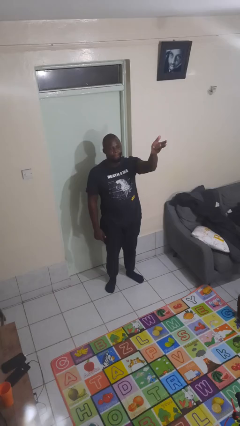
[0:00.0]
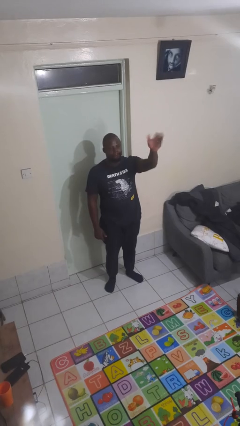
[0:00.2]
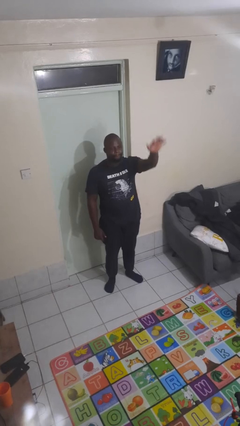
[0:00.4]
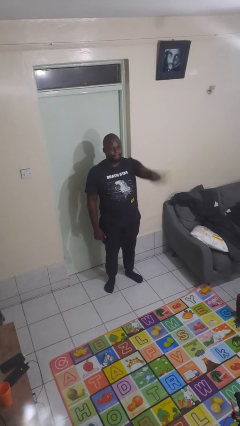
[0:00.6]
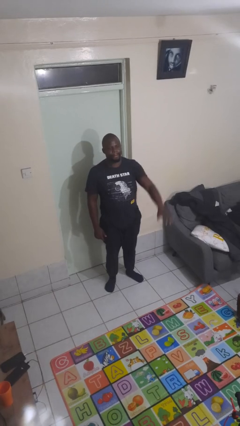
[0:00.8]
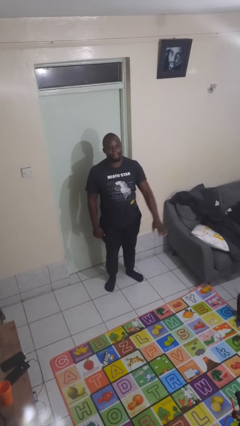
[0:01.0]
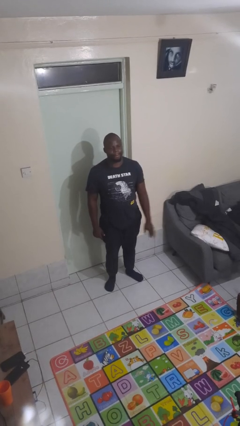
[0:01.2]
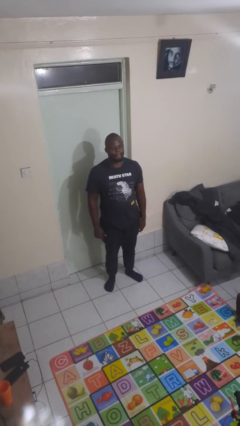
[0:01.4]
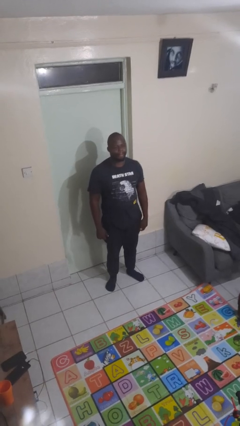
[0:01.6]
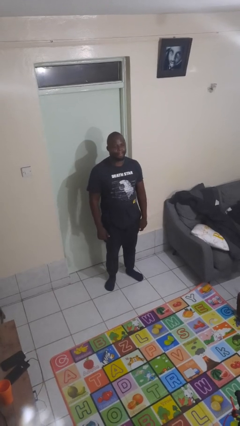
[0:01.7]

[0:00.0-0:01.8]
person gestures swipe down

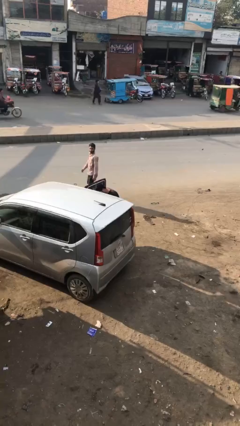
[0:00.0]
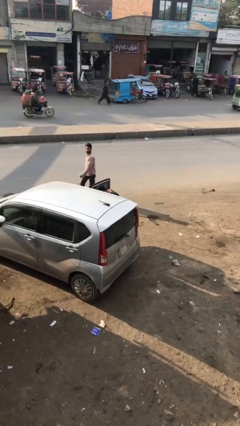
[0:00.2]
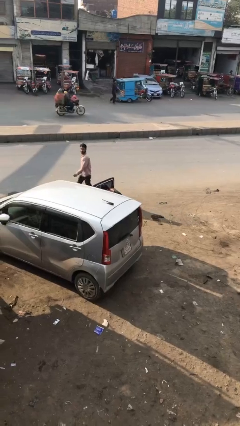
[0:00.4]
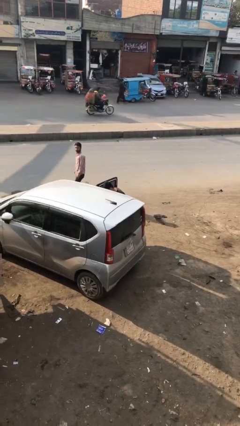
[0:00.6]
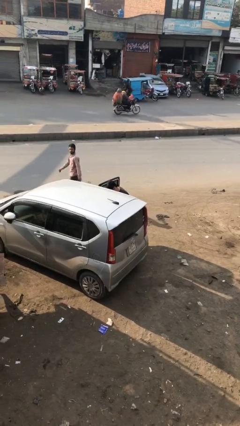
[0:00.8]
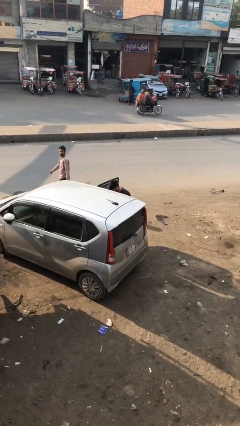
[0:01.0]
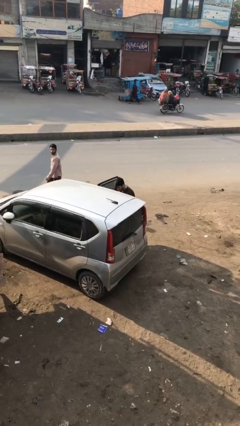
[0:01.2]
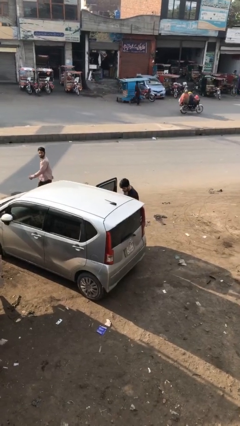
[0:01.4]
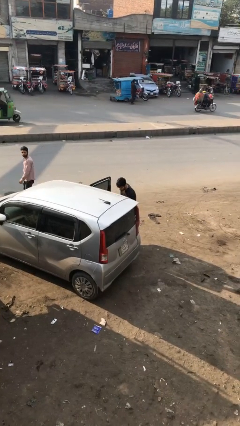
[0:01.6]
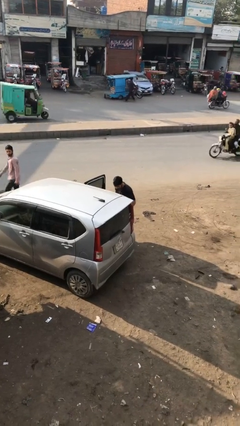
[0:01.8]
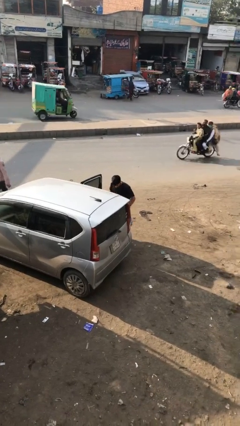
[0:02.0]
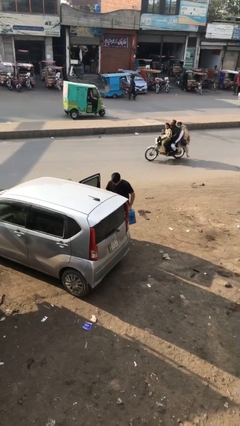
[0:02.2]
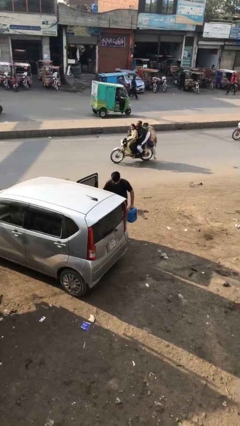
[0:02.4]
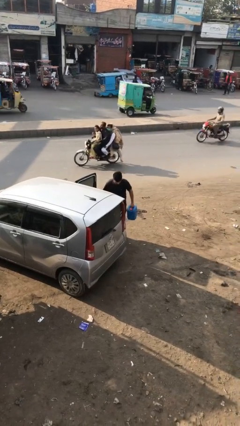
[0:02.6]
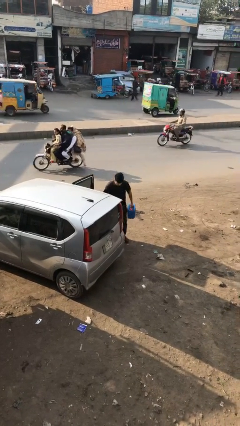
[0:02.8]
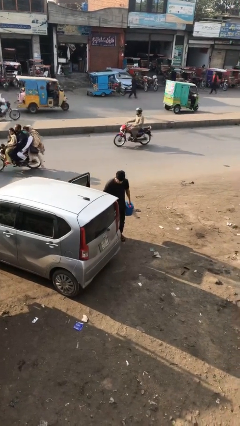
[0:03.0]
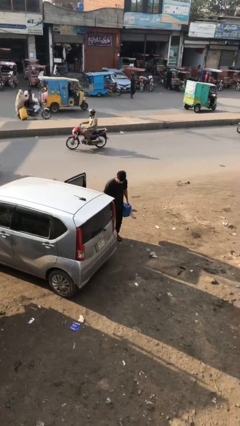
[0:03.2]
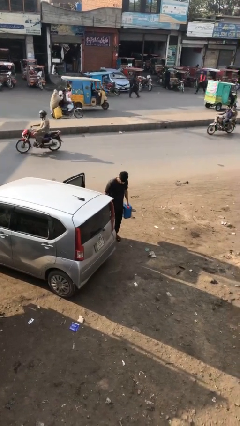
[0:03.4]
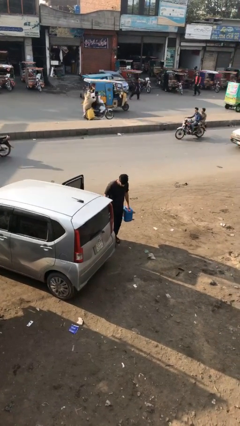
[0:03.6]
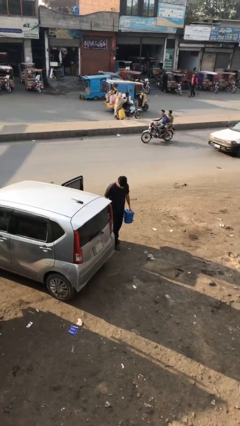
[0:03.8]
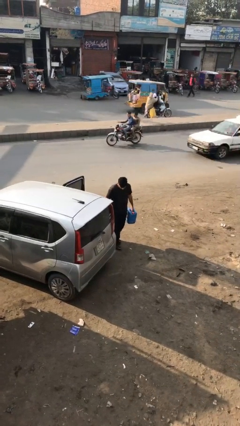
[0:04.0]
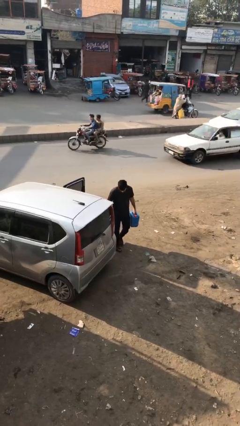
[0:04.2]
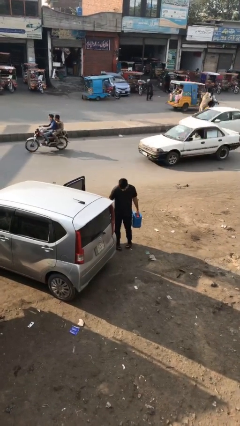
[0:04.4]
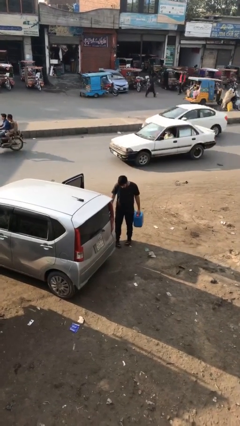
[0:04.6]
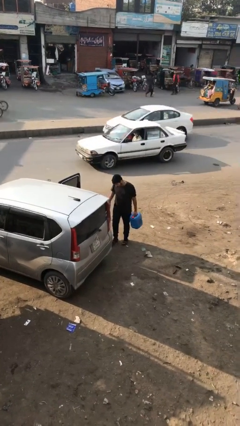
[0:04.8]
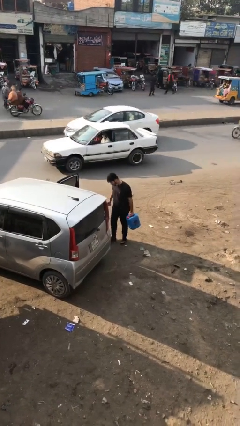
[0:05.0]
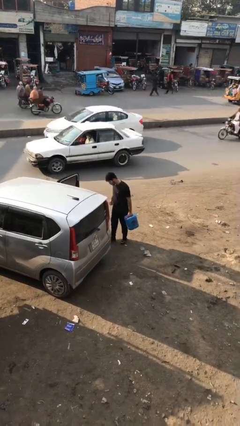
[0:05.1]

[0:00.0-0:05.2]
person unloads car

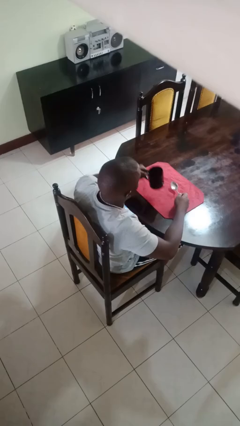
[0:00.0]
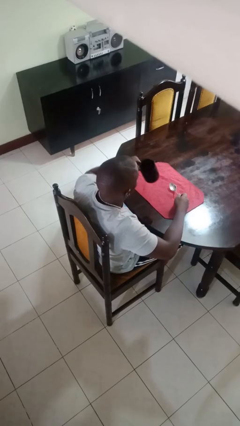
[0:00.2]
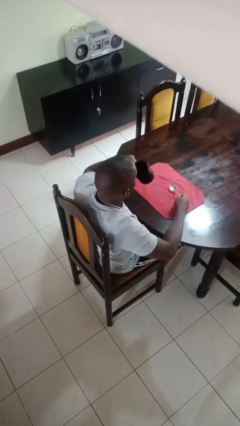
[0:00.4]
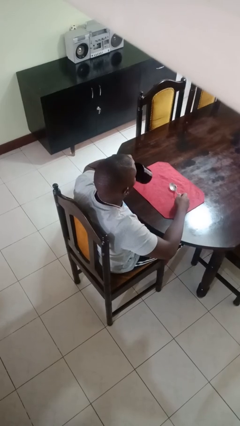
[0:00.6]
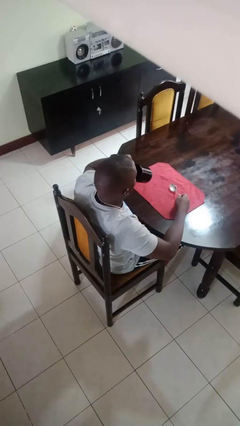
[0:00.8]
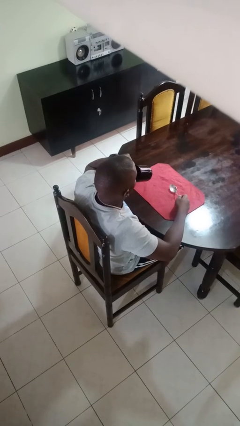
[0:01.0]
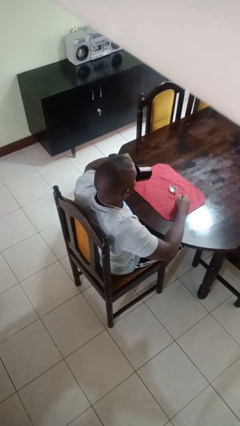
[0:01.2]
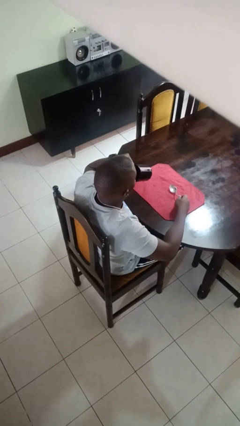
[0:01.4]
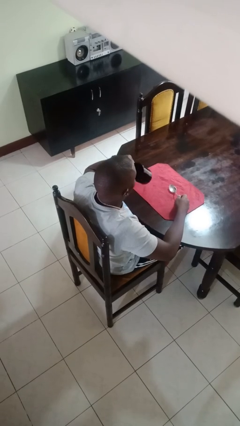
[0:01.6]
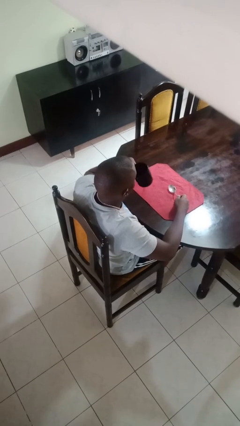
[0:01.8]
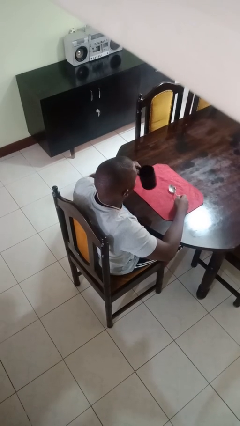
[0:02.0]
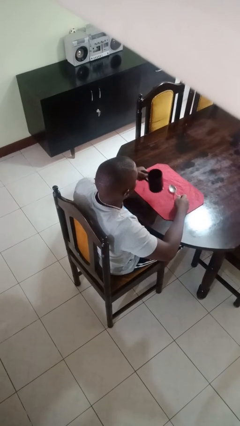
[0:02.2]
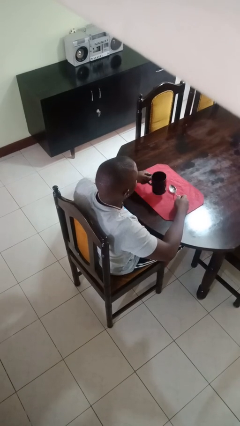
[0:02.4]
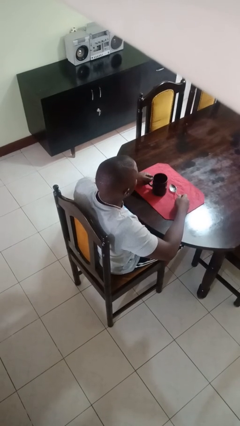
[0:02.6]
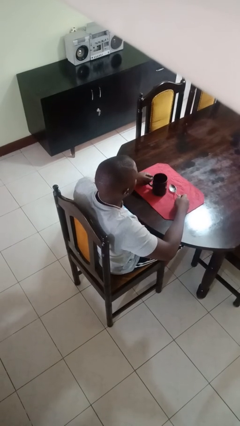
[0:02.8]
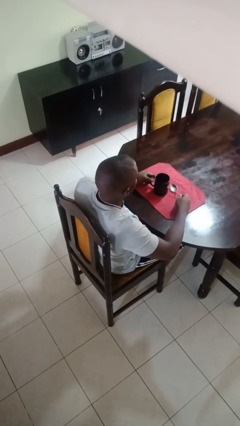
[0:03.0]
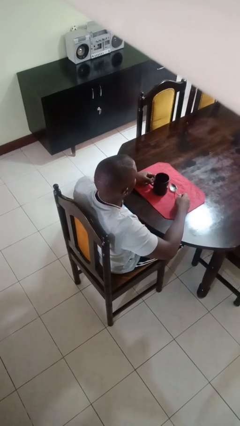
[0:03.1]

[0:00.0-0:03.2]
person drinks from mug

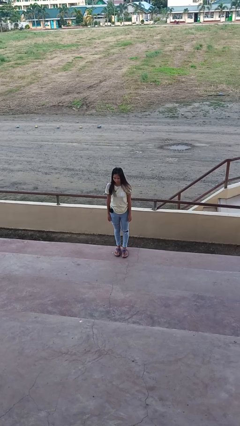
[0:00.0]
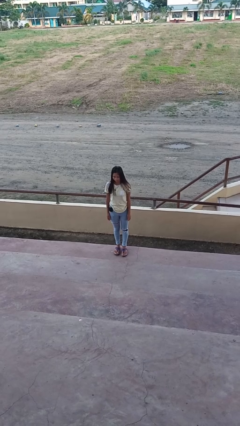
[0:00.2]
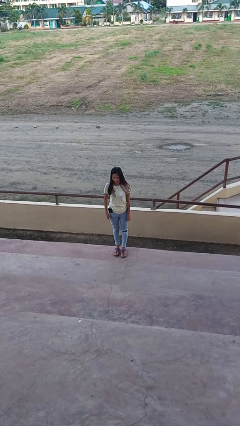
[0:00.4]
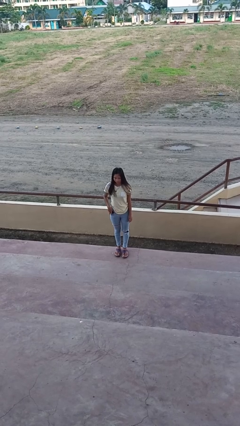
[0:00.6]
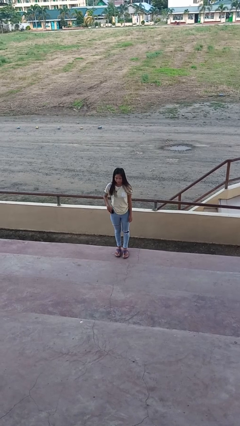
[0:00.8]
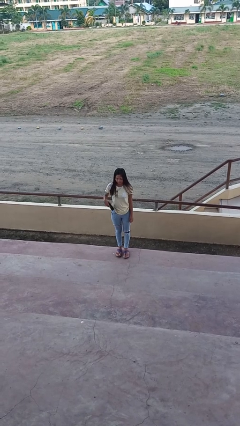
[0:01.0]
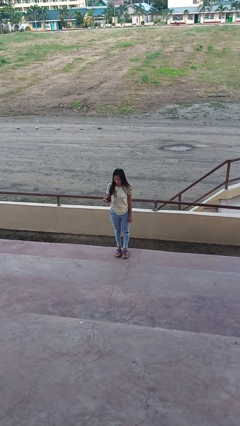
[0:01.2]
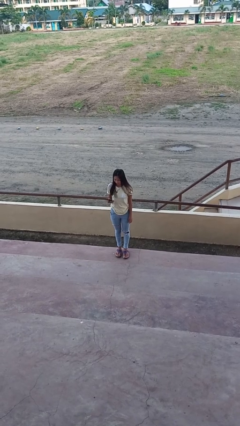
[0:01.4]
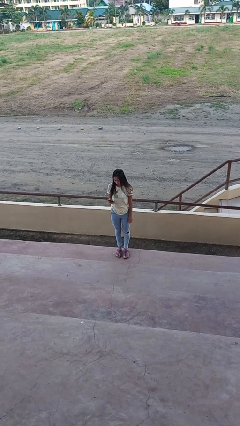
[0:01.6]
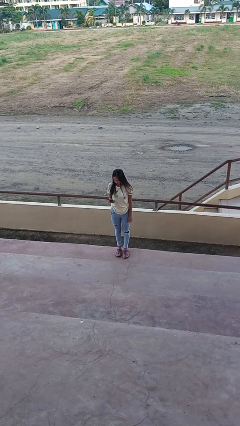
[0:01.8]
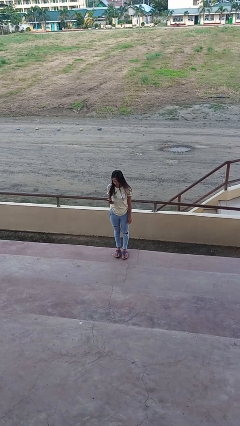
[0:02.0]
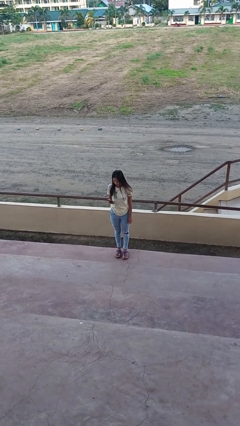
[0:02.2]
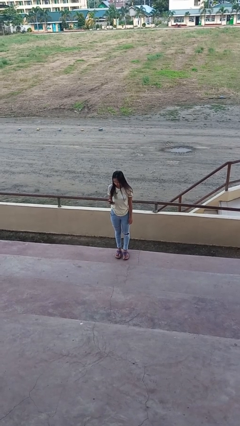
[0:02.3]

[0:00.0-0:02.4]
person takes phone from pocket

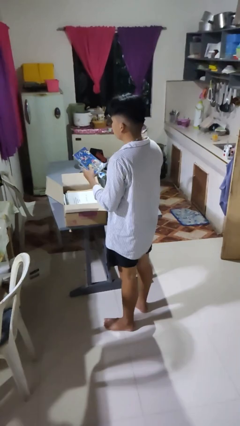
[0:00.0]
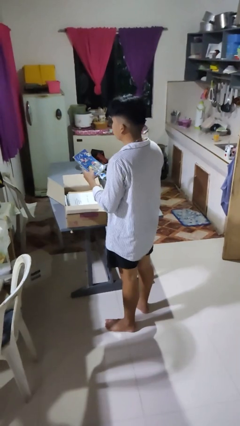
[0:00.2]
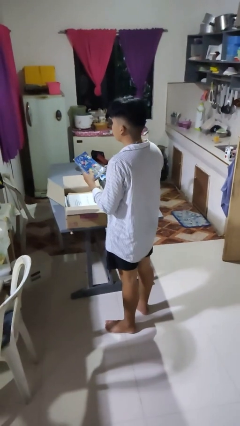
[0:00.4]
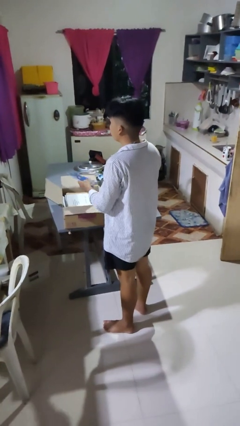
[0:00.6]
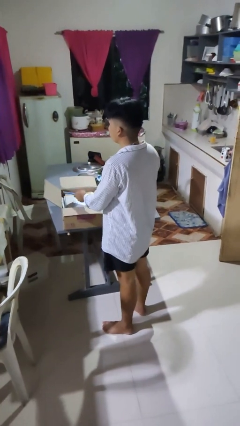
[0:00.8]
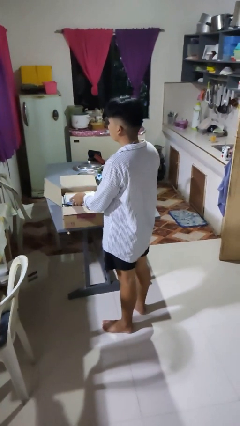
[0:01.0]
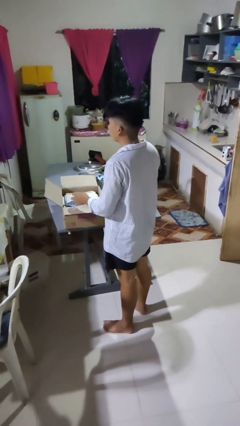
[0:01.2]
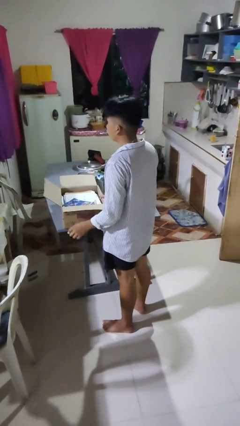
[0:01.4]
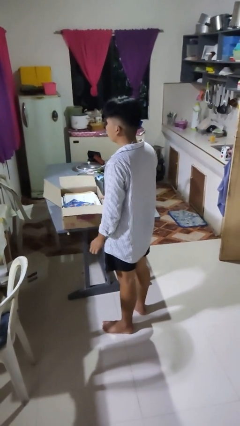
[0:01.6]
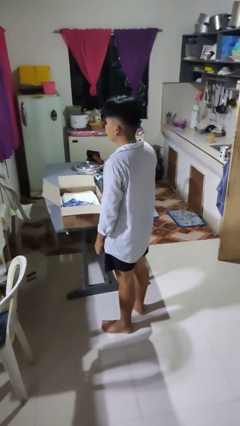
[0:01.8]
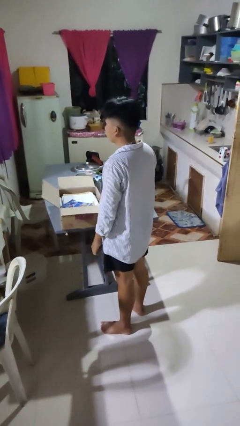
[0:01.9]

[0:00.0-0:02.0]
person puts object into box

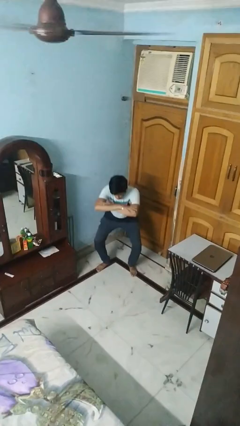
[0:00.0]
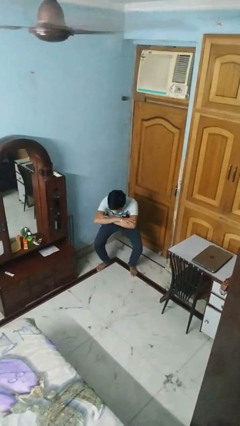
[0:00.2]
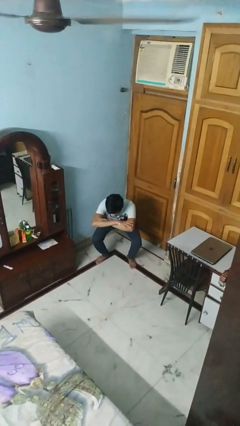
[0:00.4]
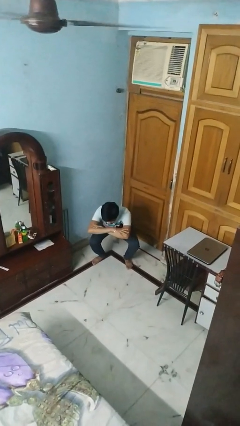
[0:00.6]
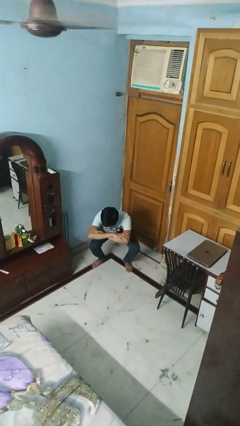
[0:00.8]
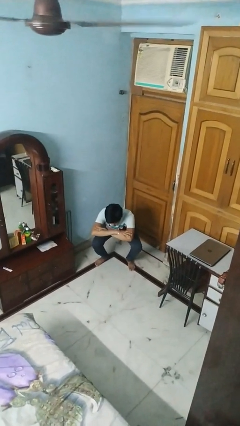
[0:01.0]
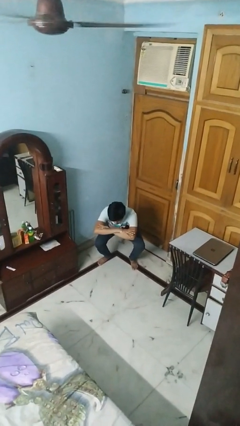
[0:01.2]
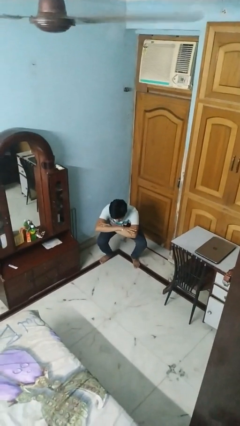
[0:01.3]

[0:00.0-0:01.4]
person squats

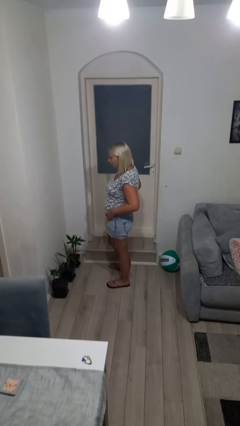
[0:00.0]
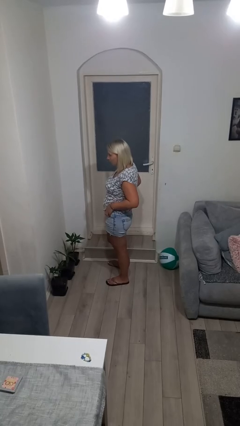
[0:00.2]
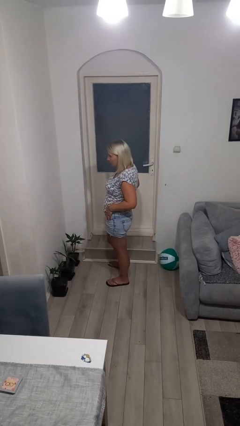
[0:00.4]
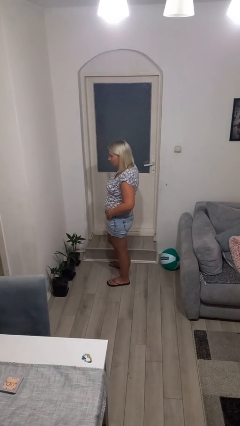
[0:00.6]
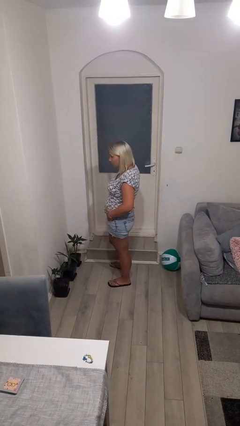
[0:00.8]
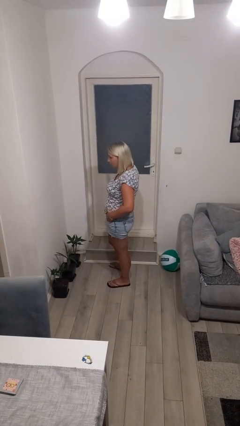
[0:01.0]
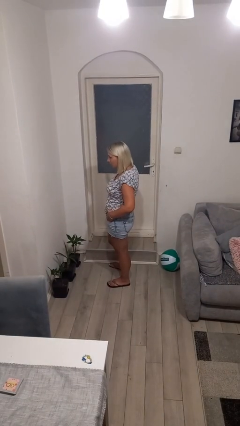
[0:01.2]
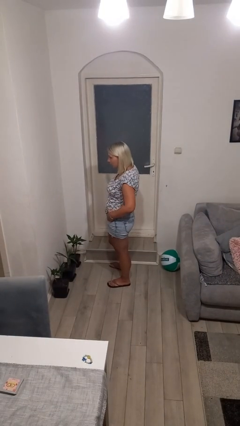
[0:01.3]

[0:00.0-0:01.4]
person puts hands in back pockets
